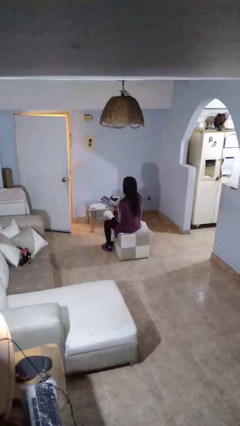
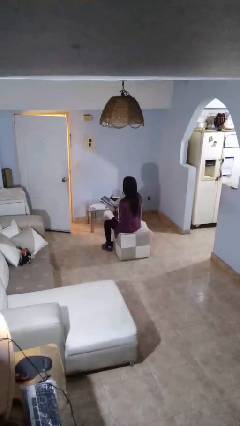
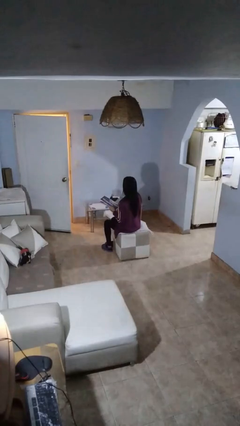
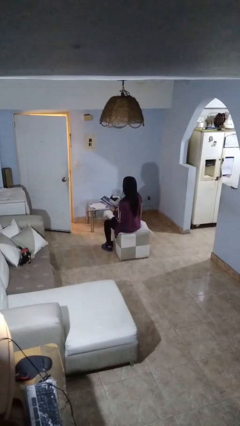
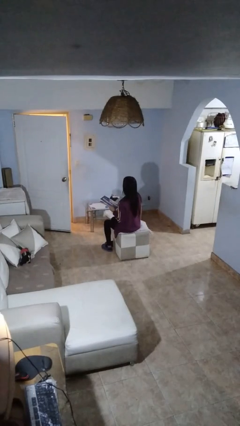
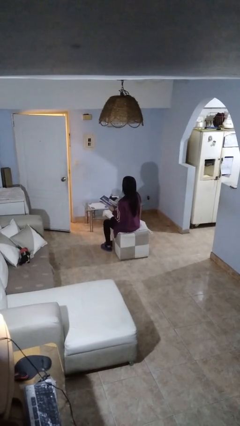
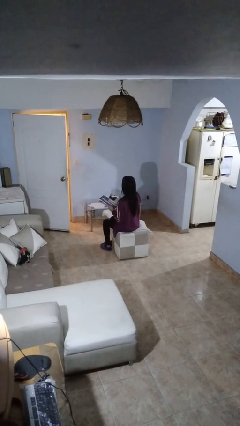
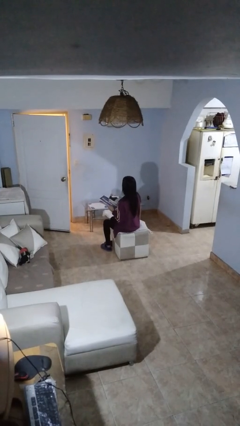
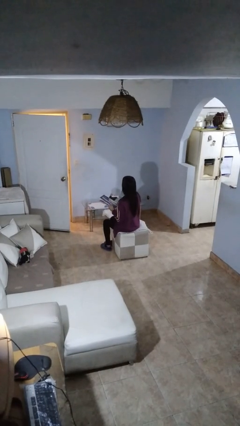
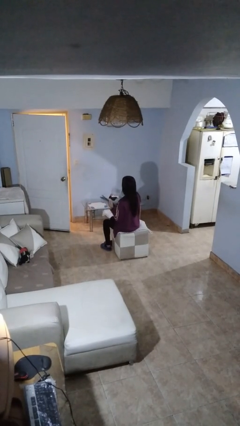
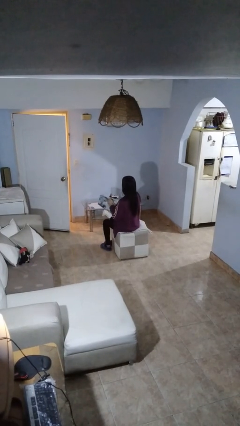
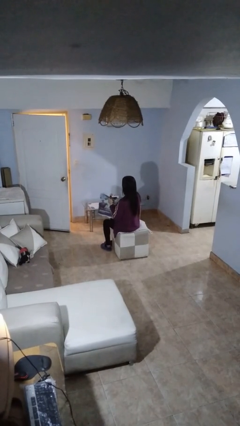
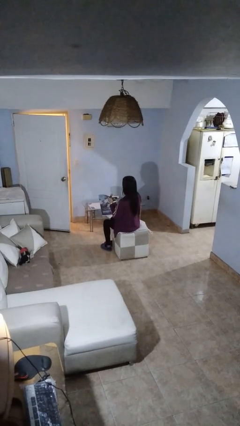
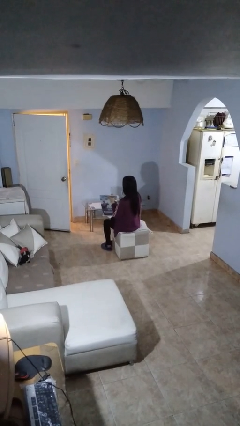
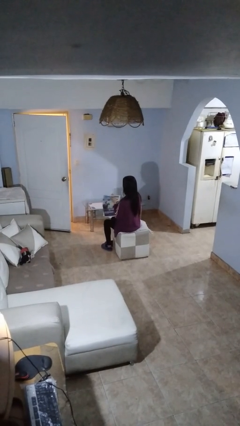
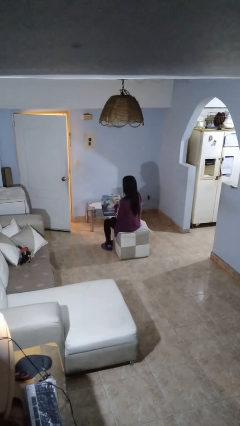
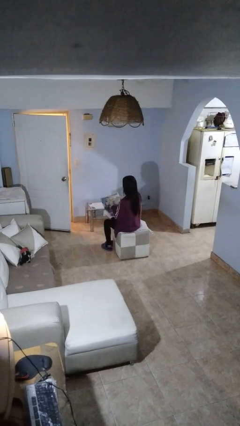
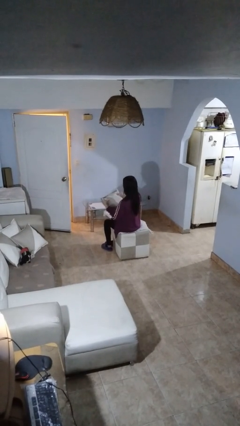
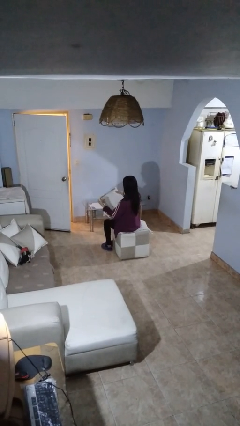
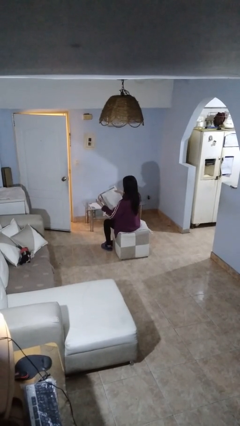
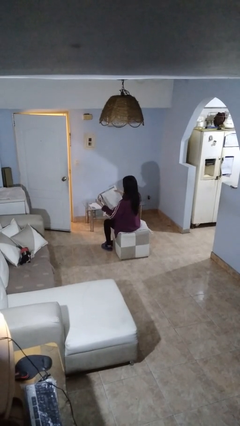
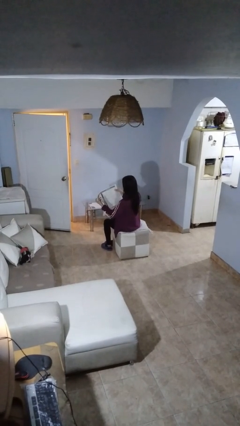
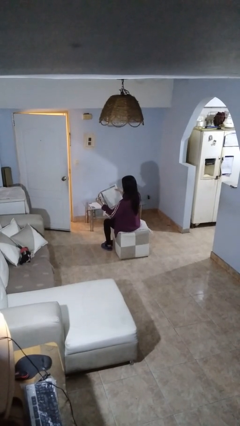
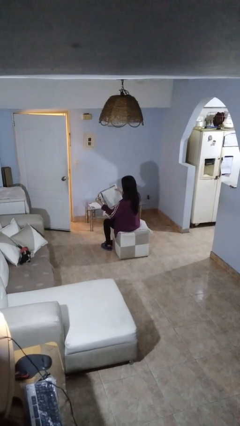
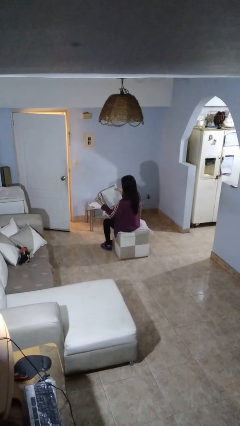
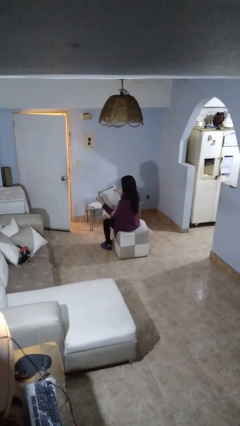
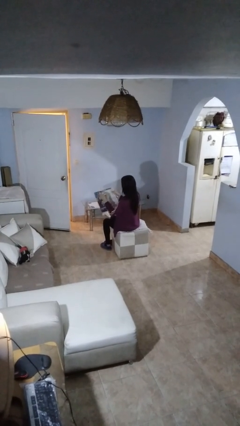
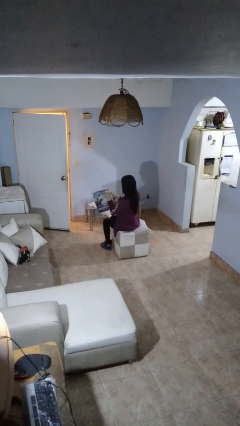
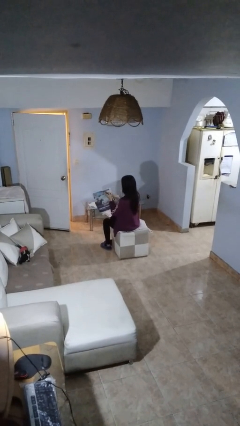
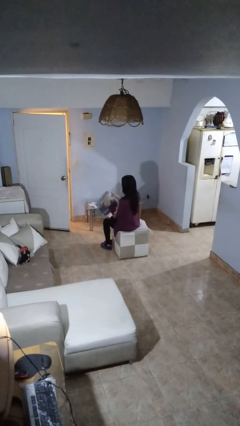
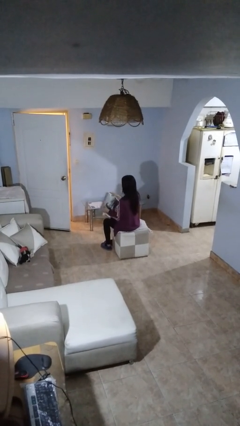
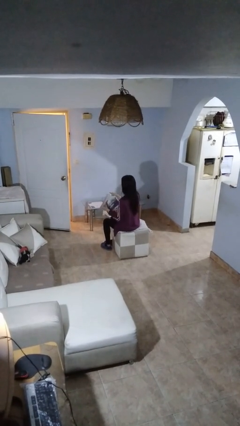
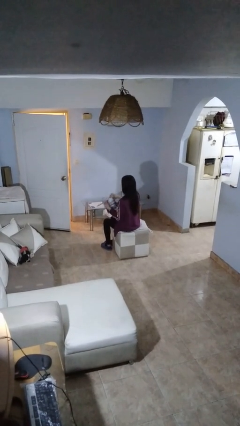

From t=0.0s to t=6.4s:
person reads newspaper

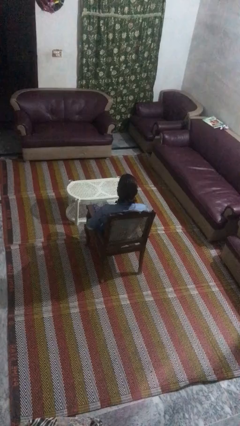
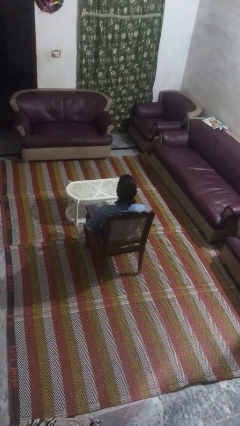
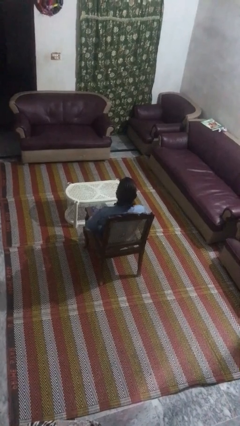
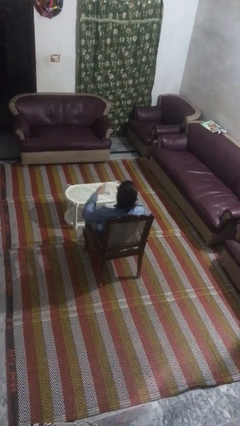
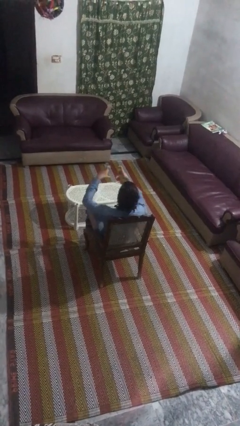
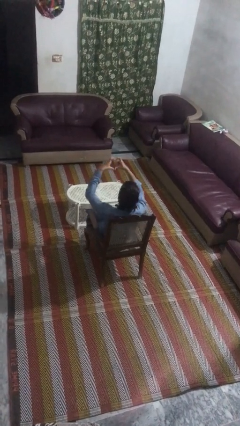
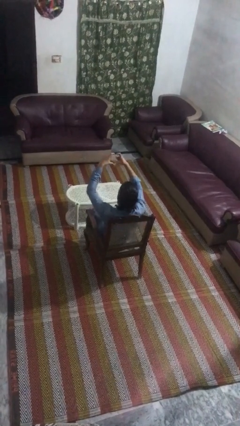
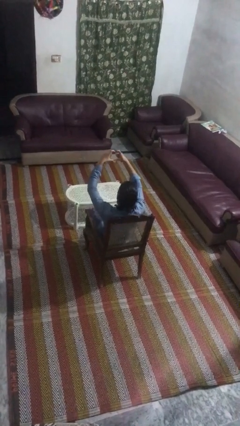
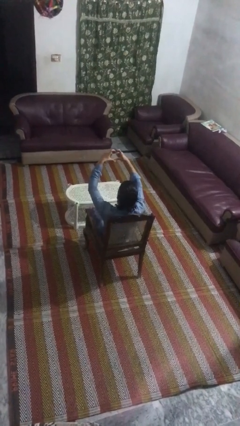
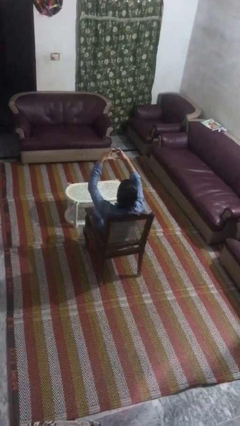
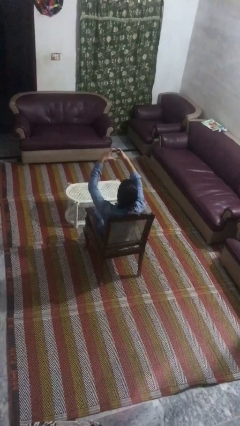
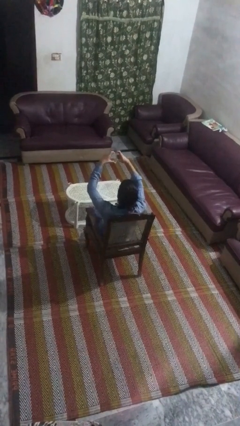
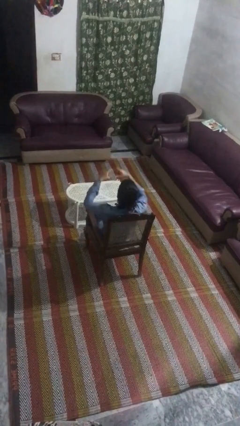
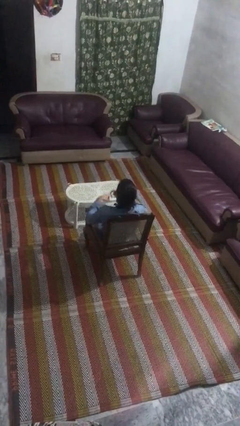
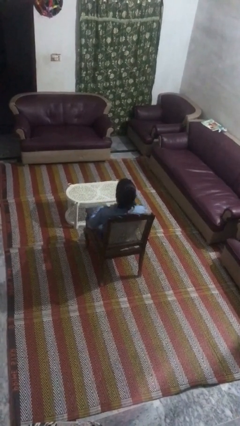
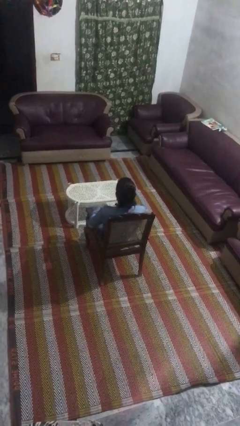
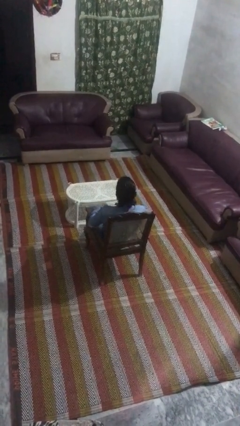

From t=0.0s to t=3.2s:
person gestures heart

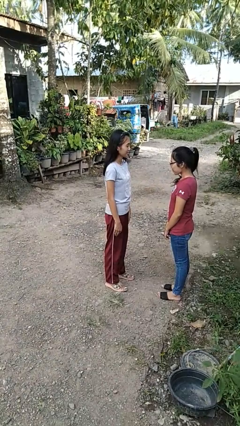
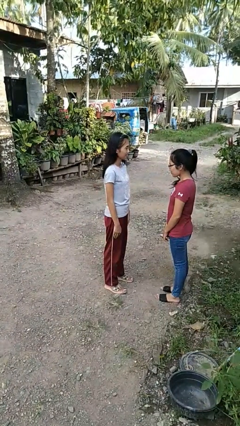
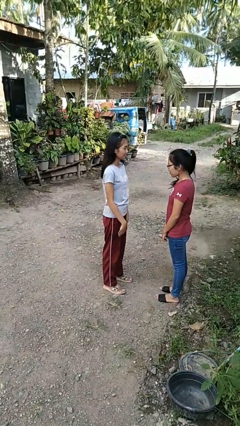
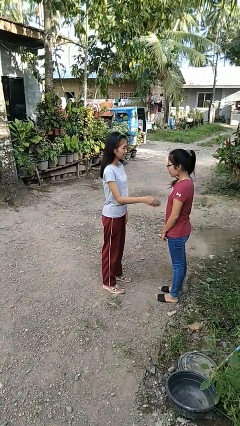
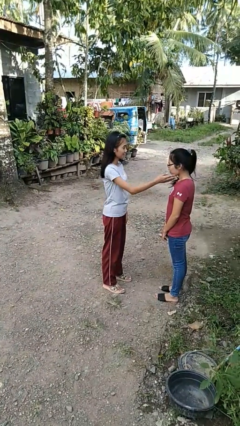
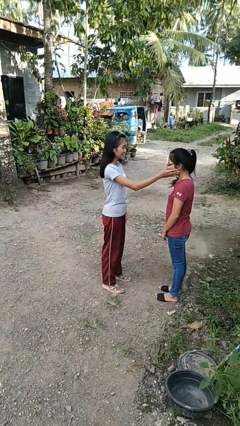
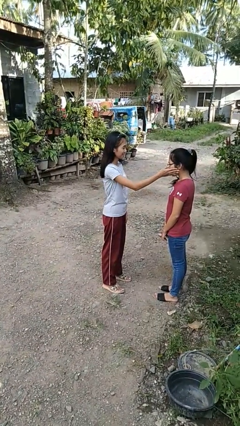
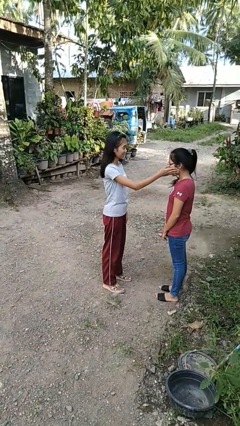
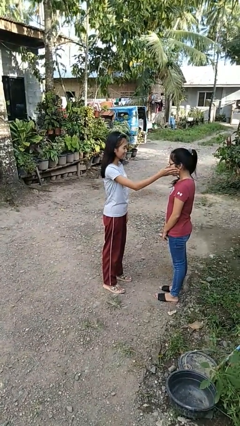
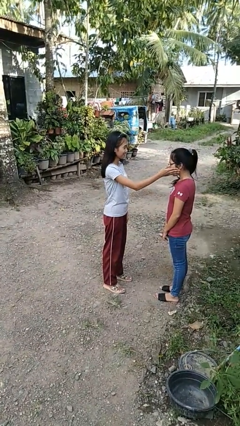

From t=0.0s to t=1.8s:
person touches face of person

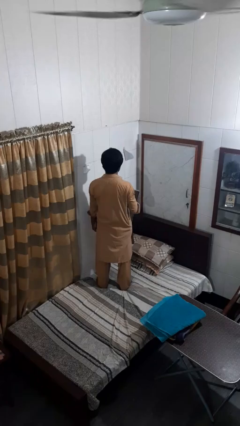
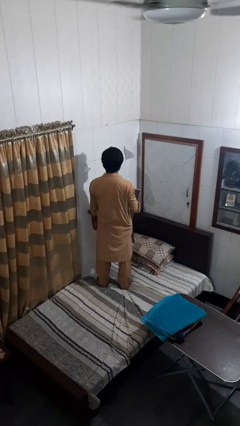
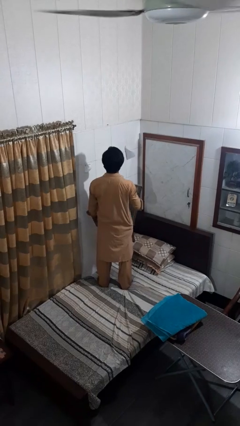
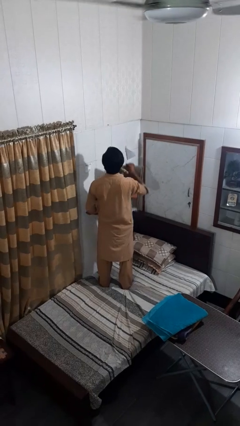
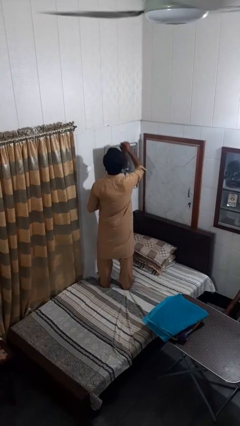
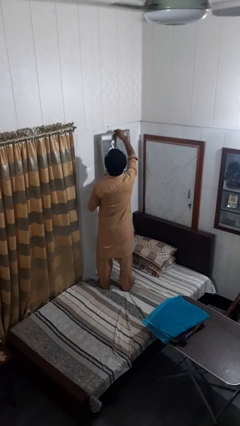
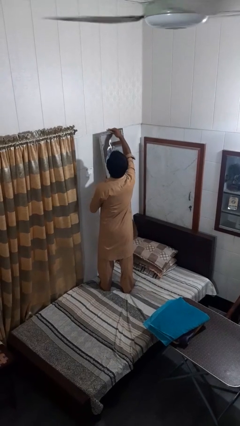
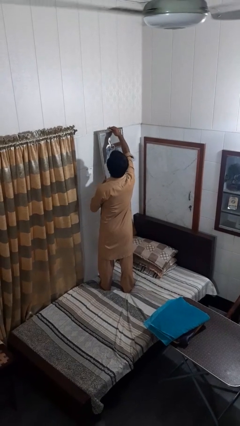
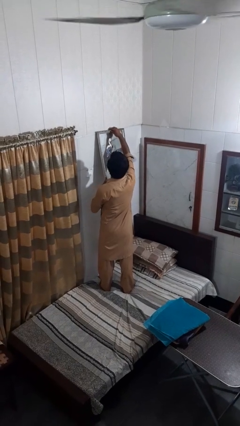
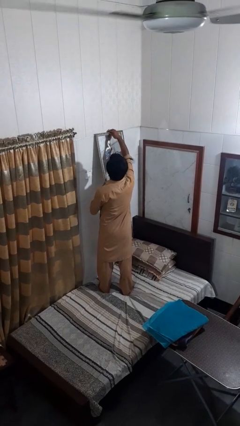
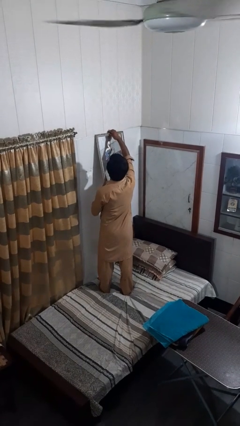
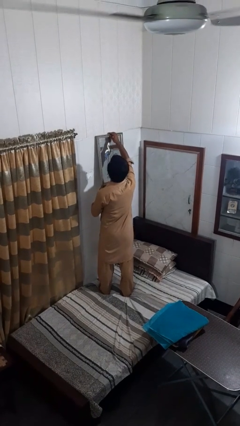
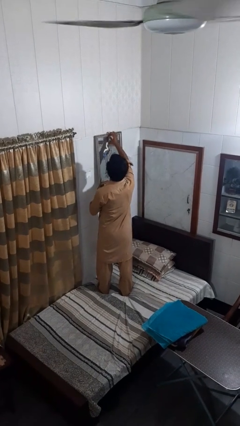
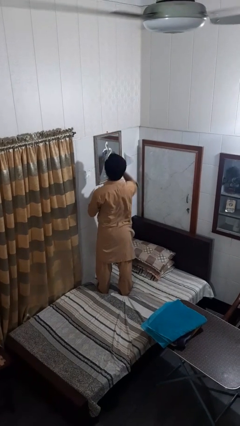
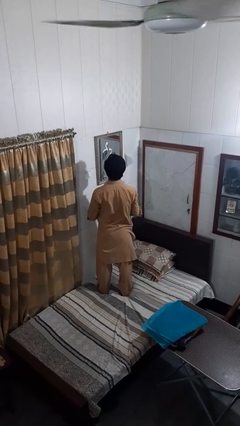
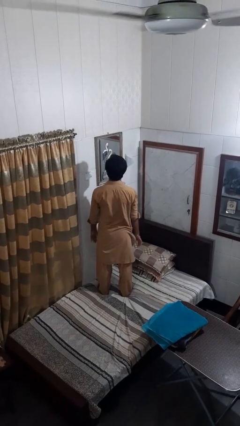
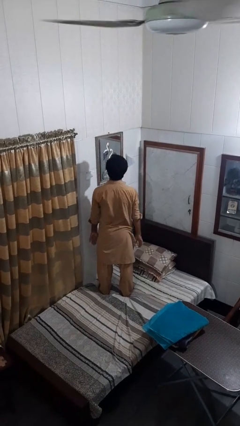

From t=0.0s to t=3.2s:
person puts up picture frame

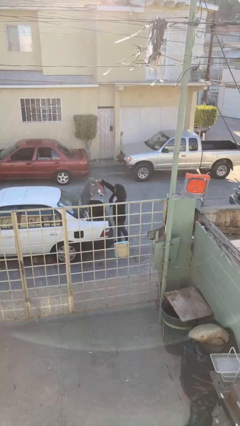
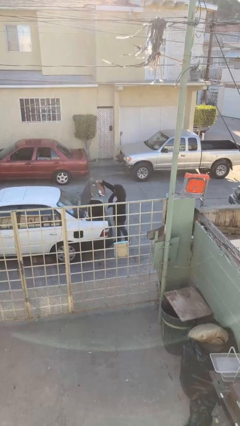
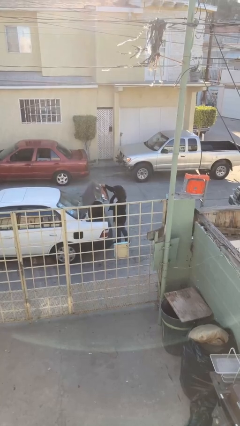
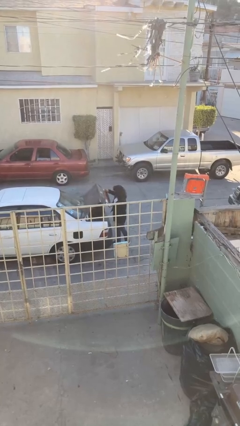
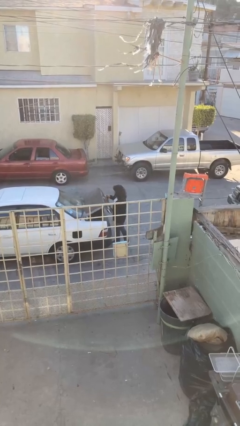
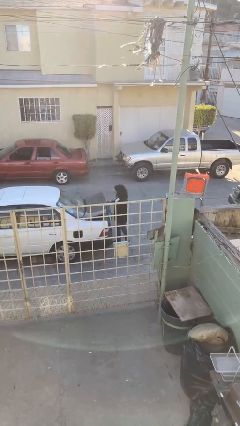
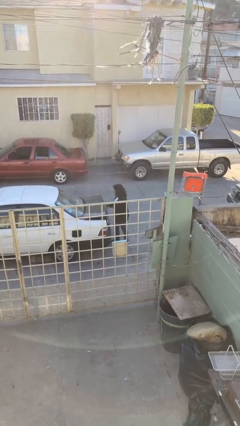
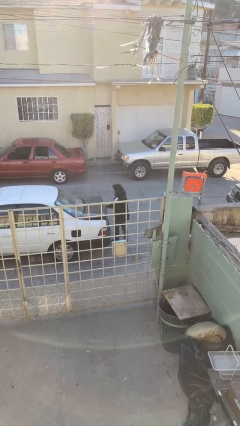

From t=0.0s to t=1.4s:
person closes car trunk

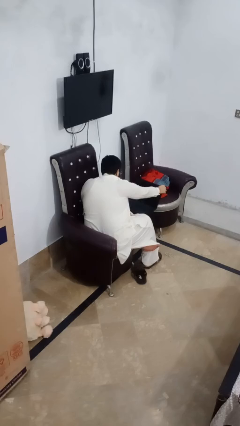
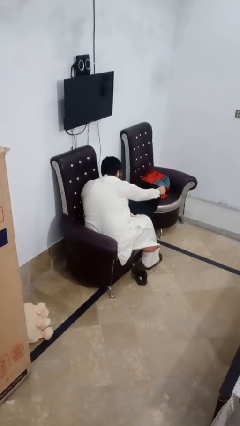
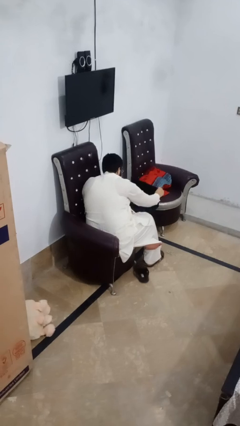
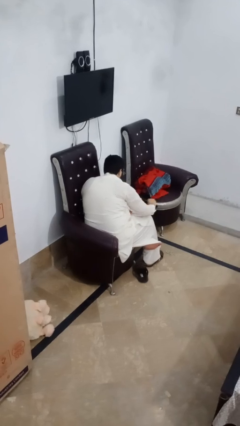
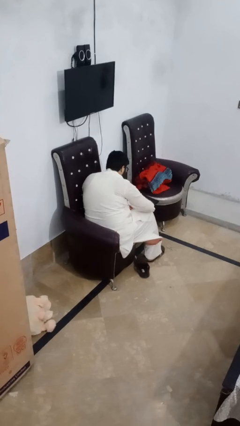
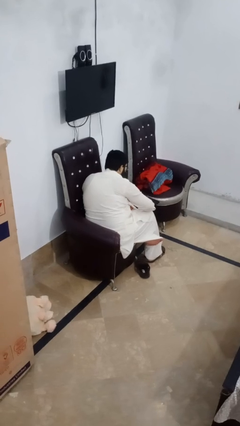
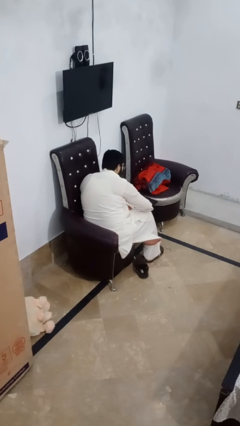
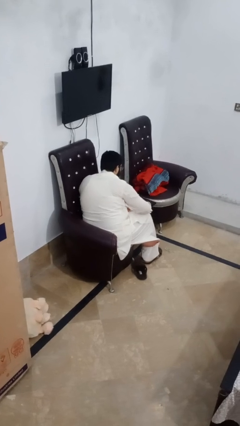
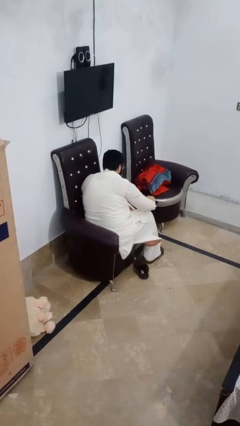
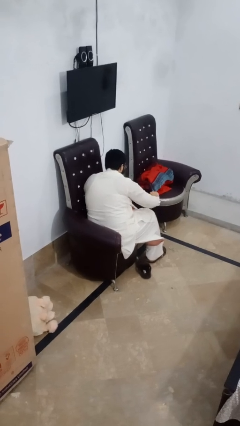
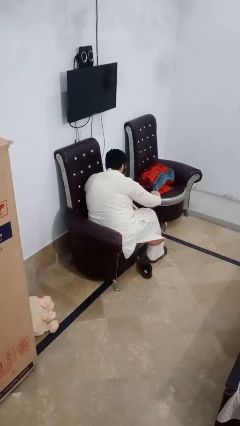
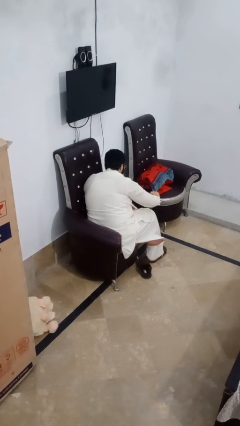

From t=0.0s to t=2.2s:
person closes laptop
